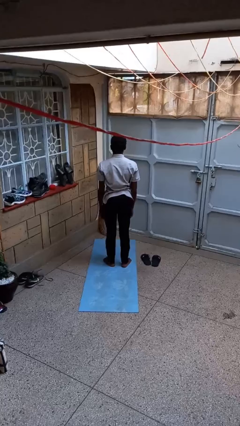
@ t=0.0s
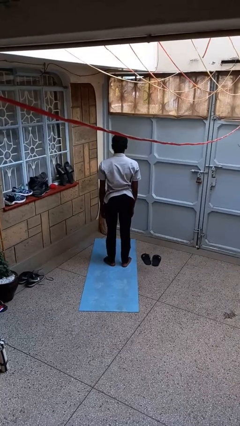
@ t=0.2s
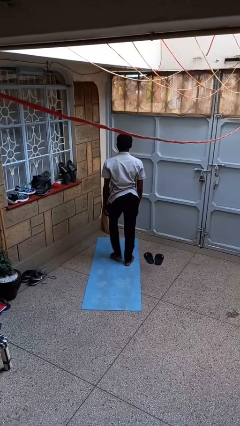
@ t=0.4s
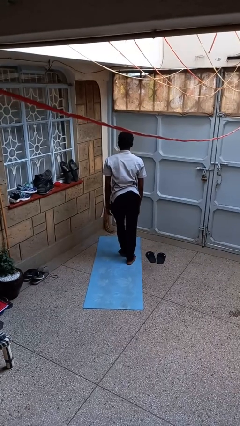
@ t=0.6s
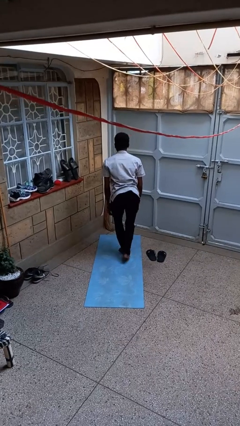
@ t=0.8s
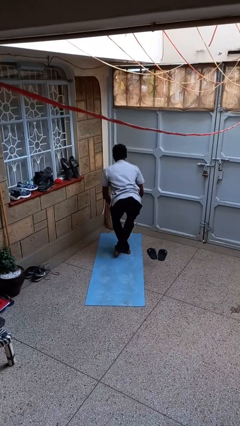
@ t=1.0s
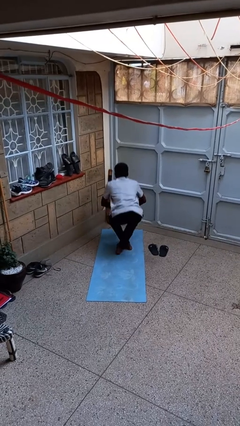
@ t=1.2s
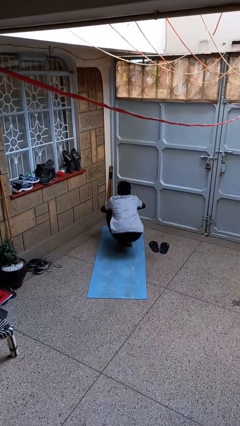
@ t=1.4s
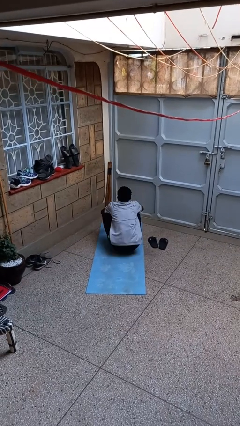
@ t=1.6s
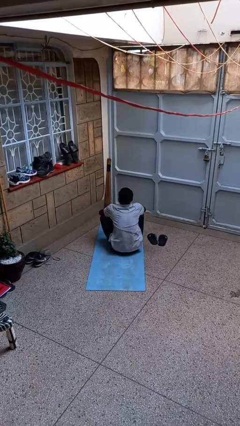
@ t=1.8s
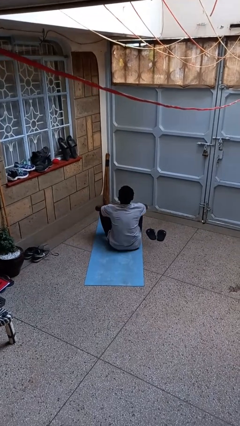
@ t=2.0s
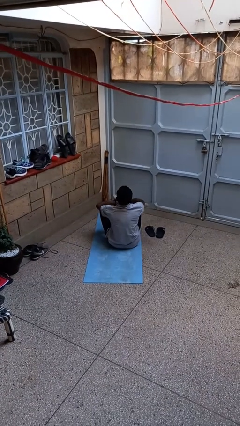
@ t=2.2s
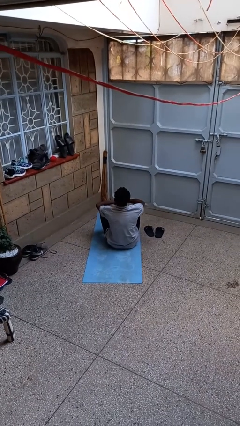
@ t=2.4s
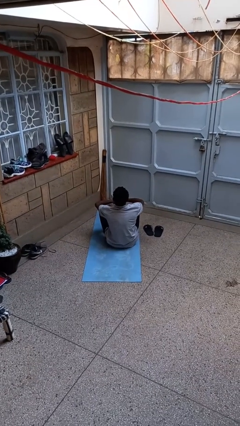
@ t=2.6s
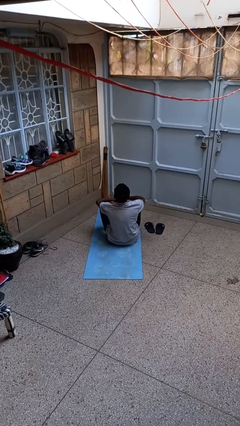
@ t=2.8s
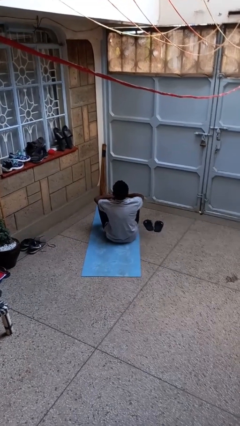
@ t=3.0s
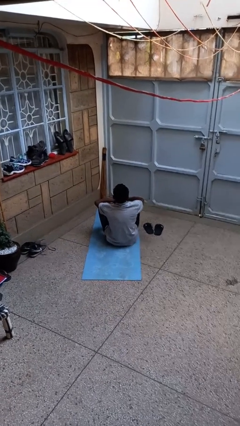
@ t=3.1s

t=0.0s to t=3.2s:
person sits crisscross

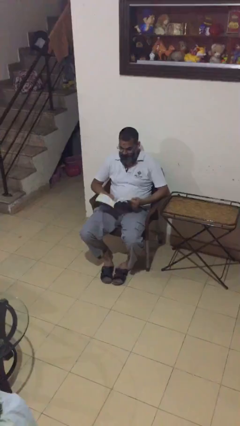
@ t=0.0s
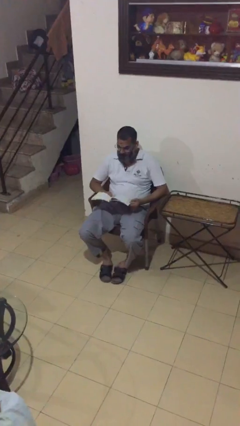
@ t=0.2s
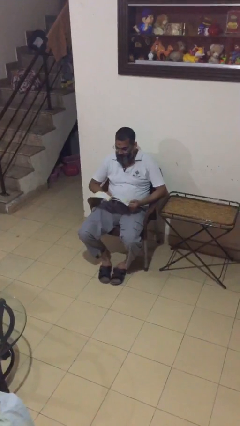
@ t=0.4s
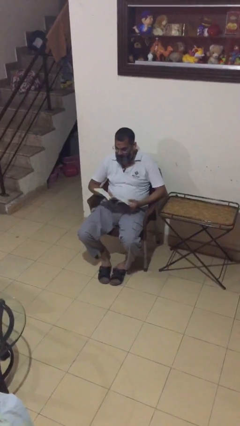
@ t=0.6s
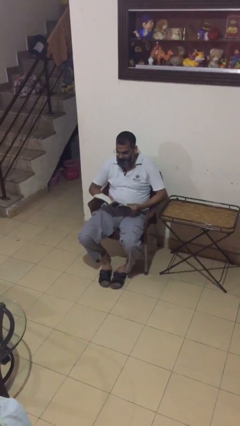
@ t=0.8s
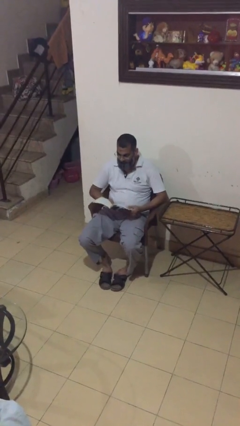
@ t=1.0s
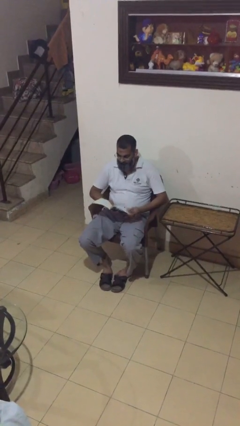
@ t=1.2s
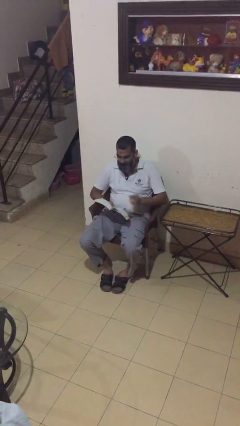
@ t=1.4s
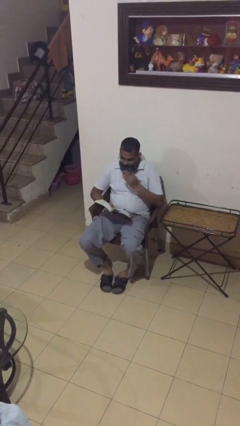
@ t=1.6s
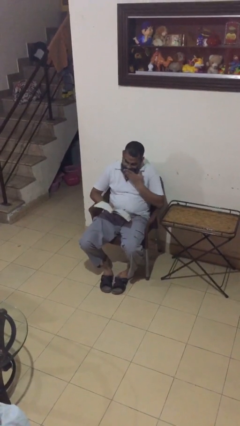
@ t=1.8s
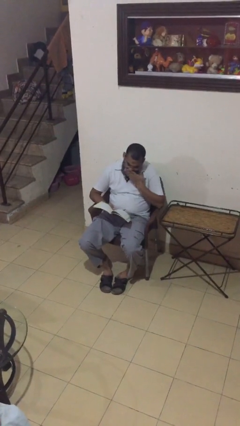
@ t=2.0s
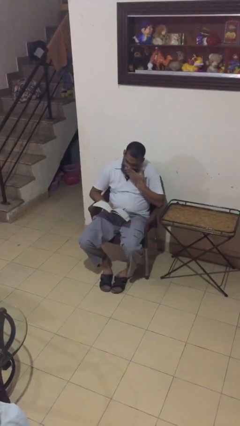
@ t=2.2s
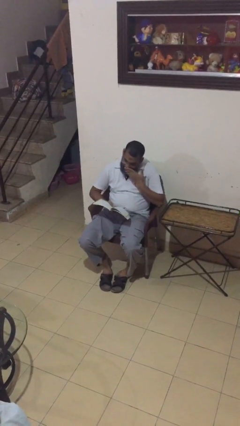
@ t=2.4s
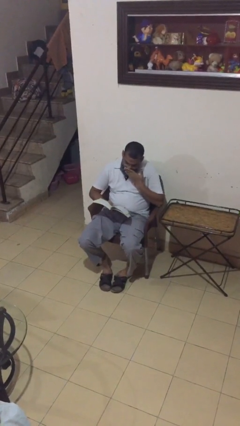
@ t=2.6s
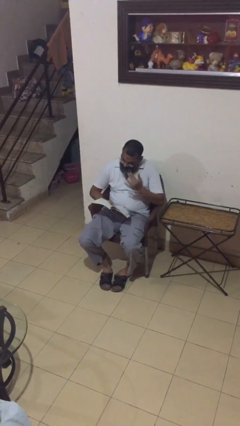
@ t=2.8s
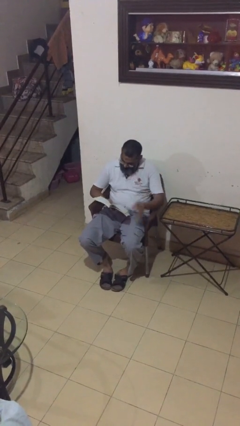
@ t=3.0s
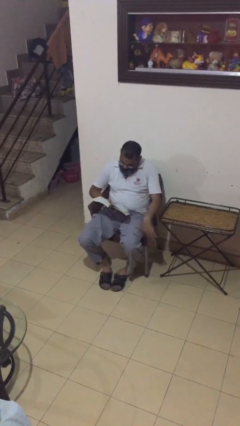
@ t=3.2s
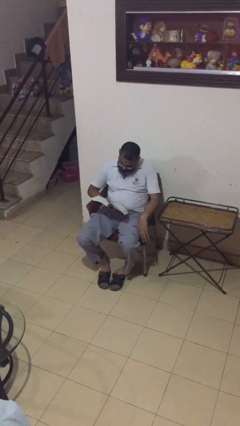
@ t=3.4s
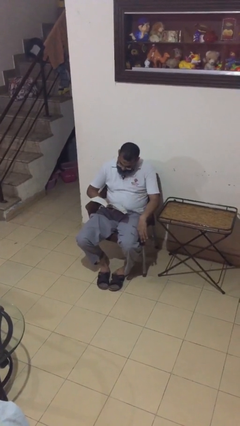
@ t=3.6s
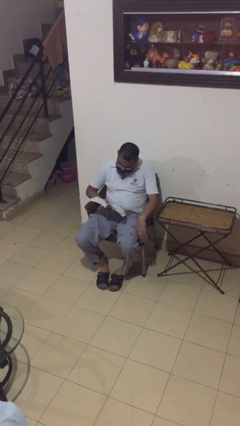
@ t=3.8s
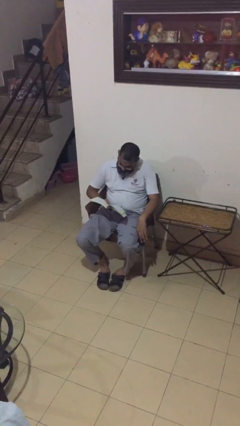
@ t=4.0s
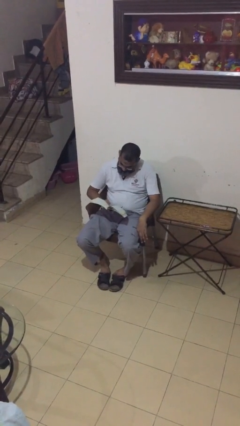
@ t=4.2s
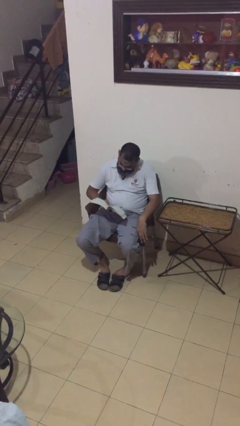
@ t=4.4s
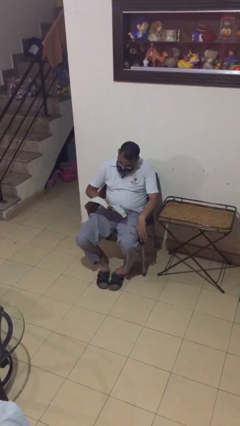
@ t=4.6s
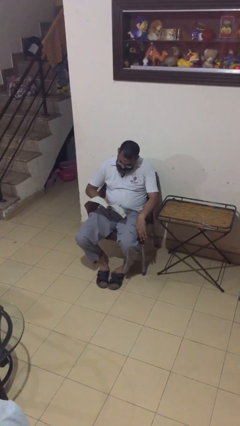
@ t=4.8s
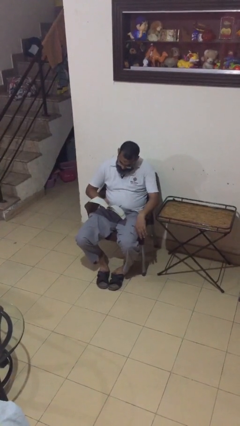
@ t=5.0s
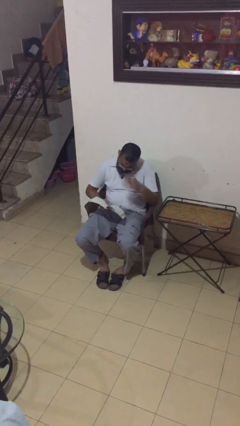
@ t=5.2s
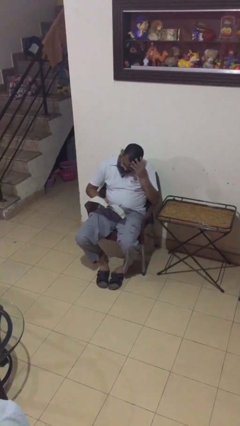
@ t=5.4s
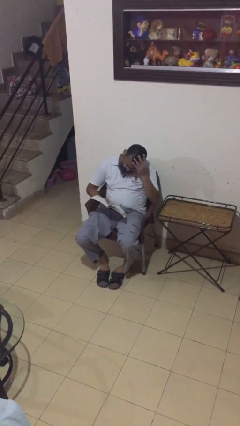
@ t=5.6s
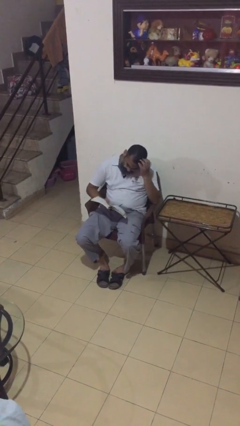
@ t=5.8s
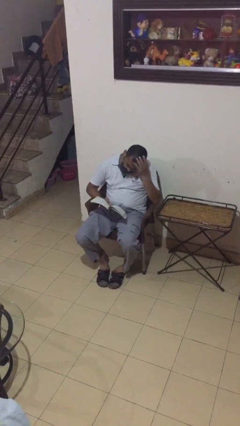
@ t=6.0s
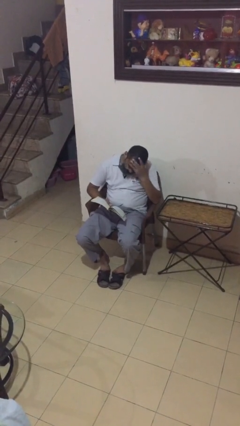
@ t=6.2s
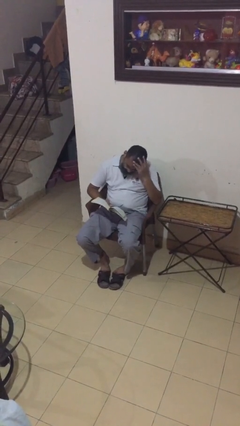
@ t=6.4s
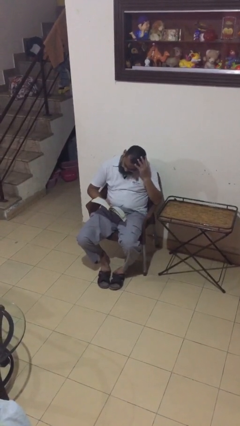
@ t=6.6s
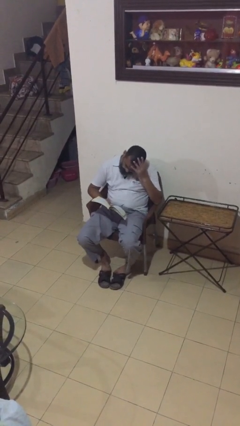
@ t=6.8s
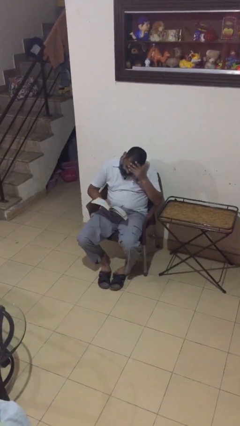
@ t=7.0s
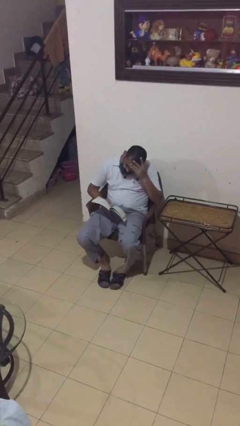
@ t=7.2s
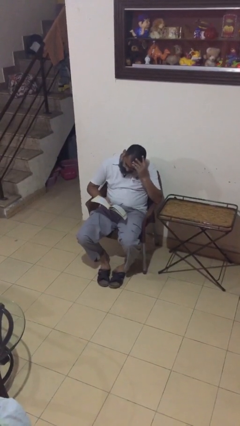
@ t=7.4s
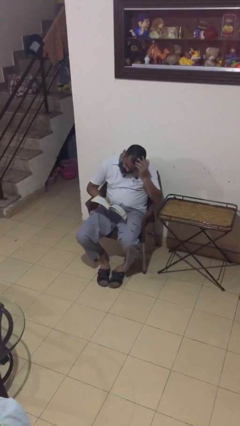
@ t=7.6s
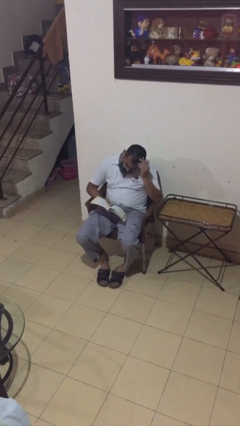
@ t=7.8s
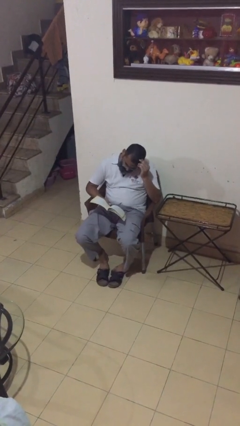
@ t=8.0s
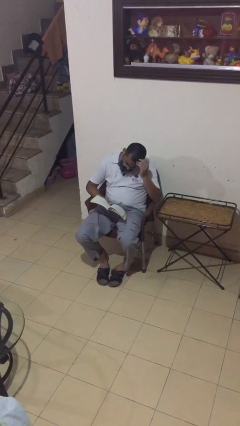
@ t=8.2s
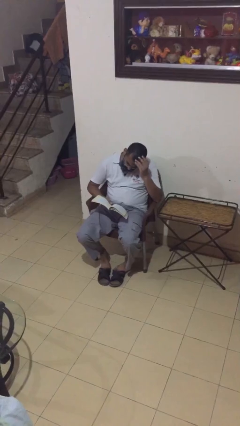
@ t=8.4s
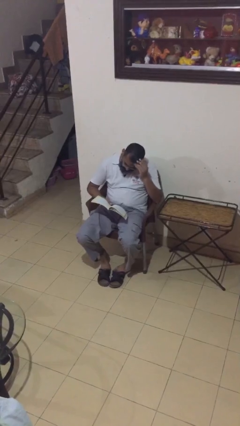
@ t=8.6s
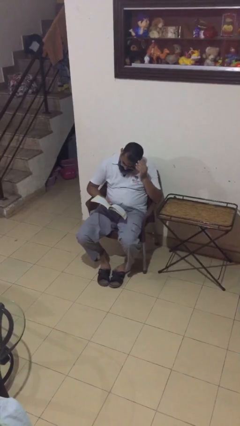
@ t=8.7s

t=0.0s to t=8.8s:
person reads document

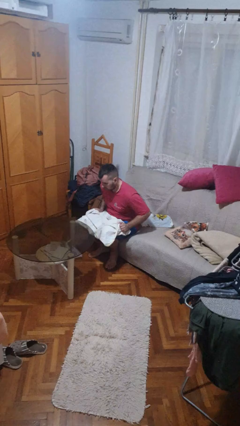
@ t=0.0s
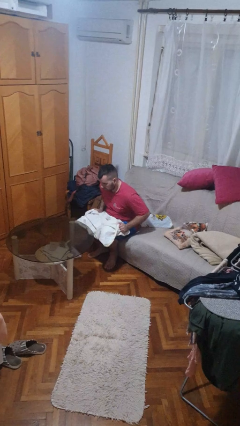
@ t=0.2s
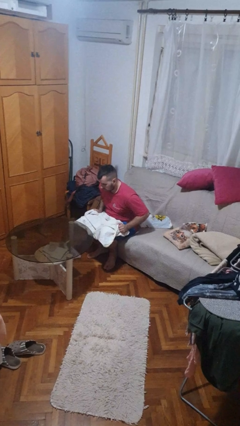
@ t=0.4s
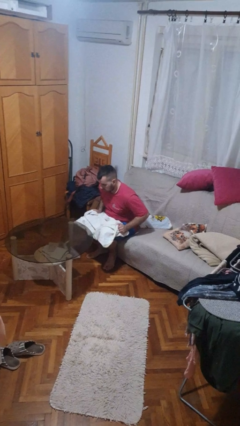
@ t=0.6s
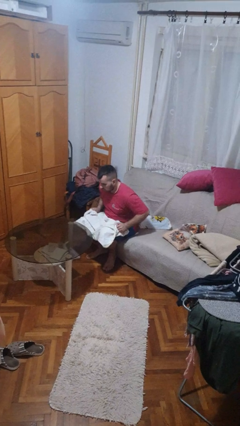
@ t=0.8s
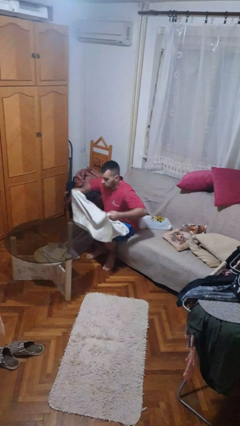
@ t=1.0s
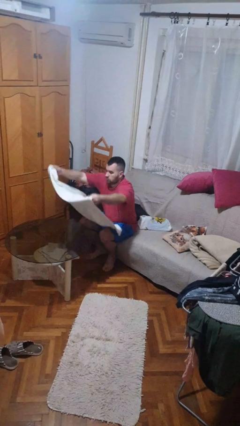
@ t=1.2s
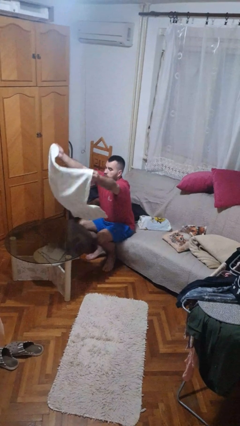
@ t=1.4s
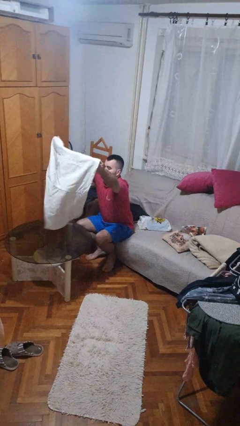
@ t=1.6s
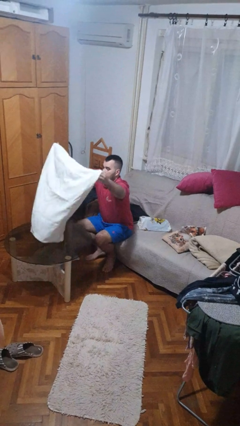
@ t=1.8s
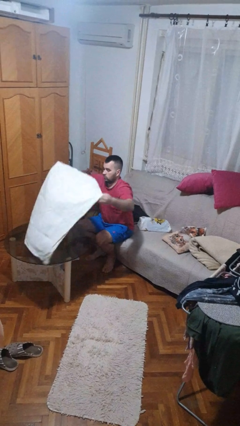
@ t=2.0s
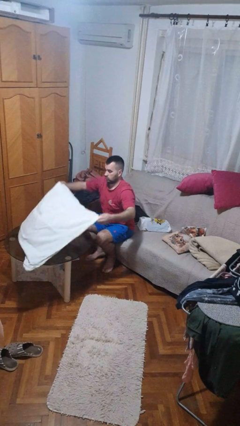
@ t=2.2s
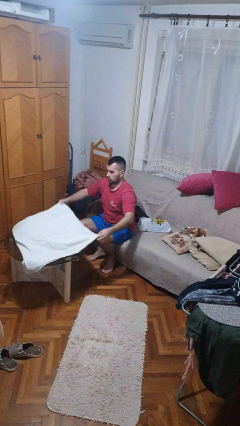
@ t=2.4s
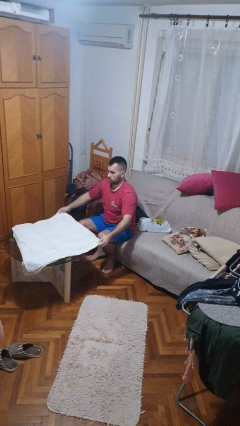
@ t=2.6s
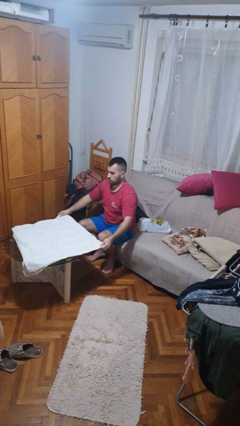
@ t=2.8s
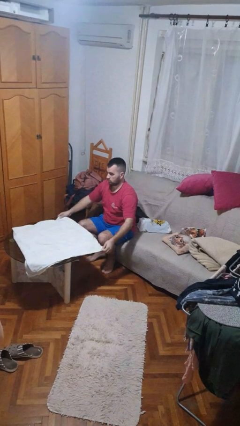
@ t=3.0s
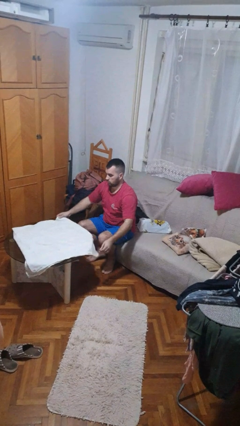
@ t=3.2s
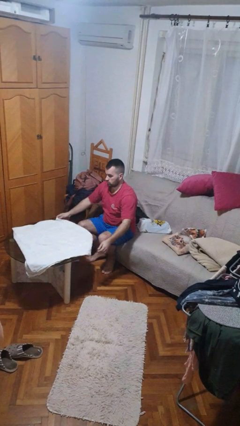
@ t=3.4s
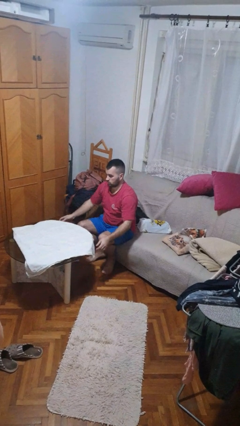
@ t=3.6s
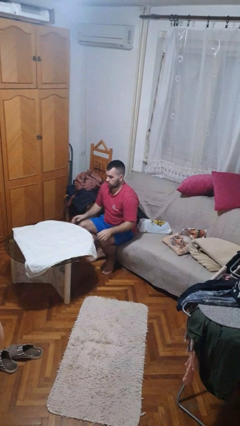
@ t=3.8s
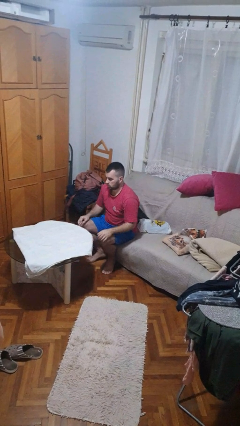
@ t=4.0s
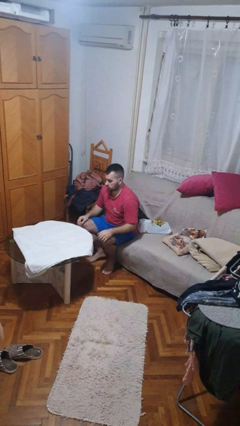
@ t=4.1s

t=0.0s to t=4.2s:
person spreads tablecloth

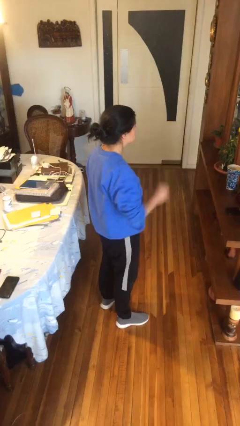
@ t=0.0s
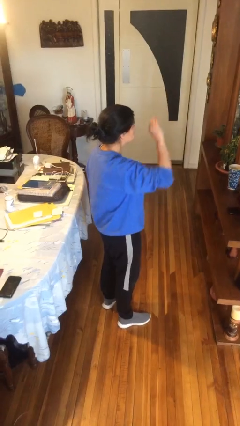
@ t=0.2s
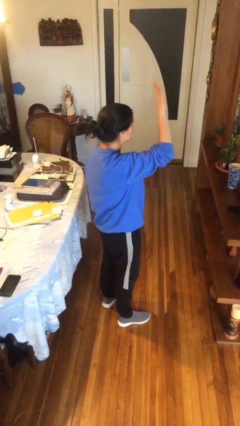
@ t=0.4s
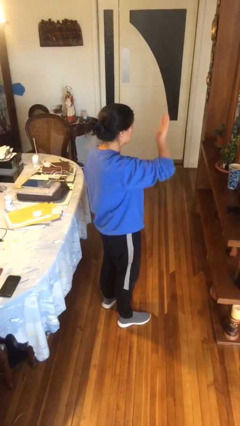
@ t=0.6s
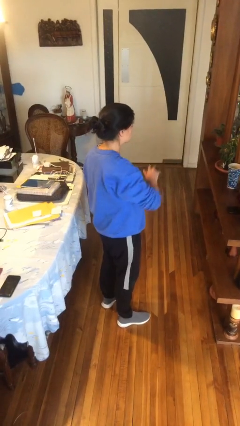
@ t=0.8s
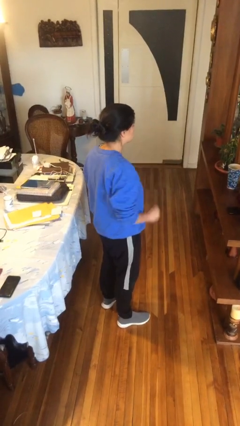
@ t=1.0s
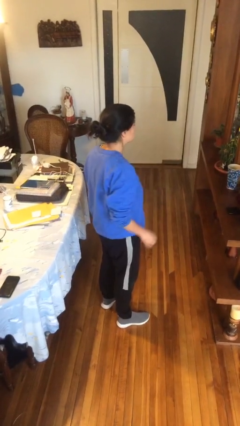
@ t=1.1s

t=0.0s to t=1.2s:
person gestures swipe down

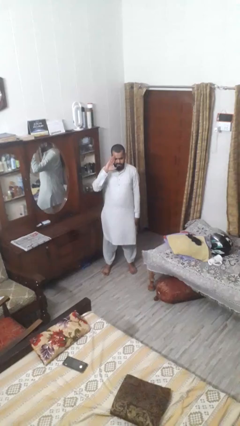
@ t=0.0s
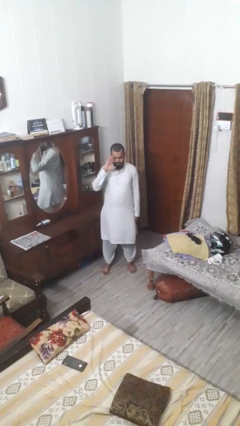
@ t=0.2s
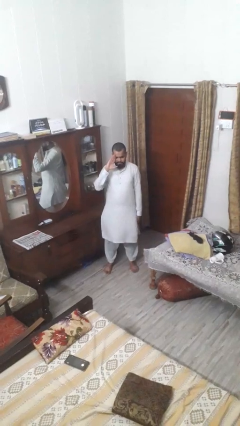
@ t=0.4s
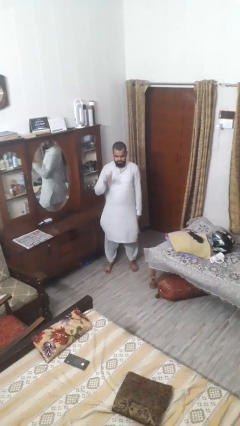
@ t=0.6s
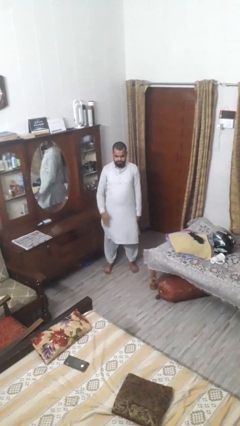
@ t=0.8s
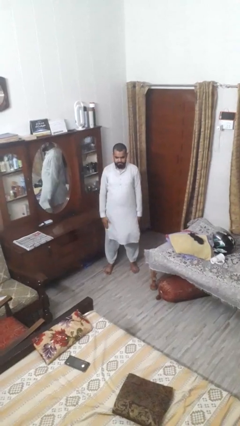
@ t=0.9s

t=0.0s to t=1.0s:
person salutes
